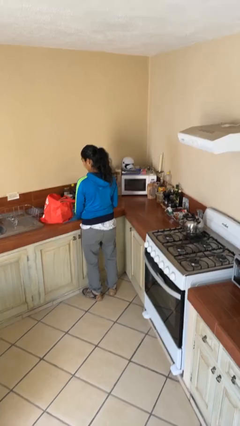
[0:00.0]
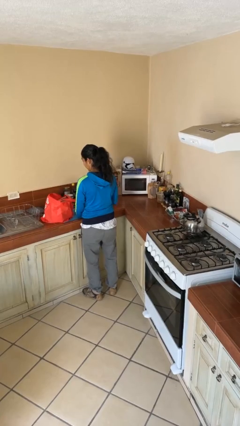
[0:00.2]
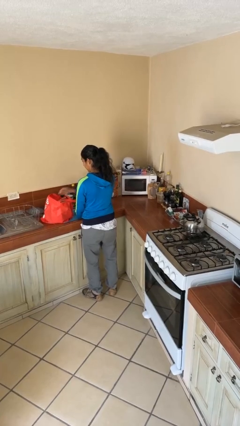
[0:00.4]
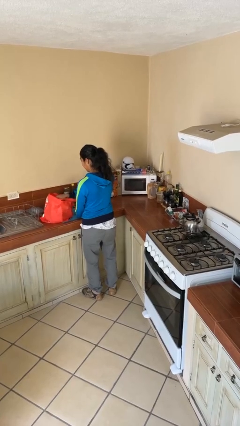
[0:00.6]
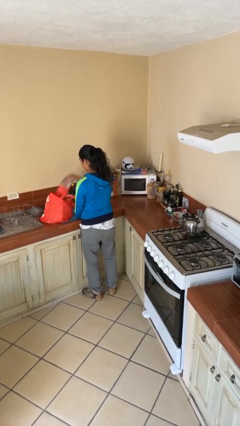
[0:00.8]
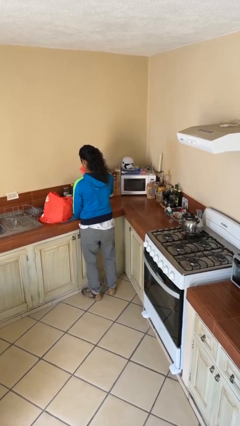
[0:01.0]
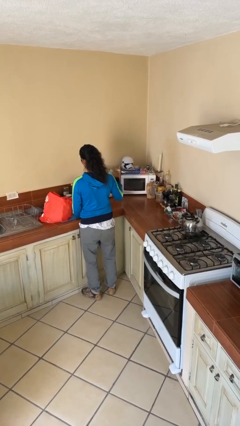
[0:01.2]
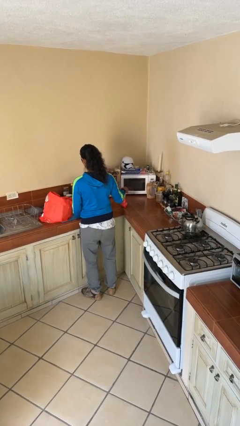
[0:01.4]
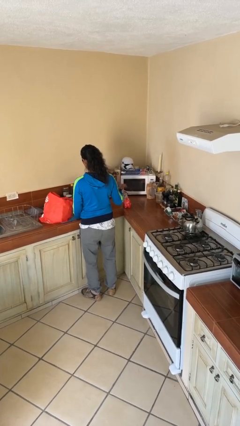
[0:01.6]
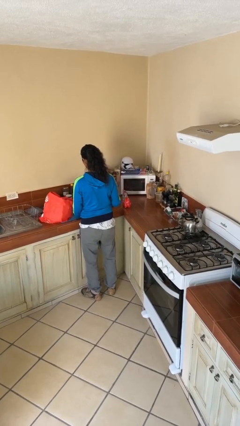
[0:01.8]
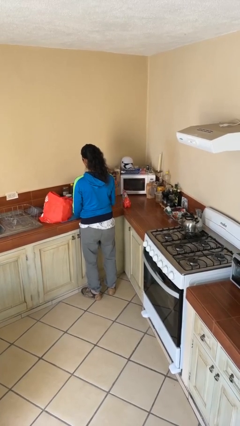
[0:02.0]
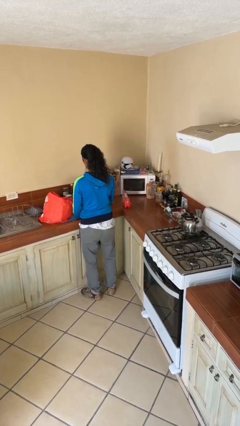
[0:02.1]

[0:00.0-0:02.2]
person takes object from bag

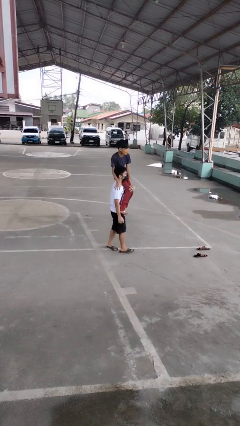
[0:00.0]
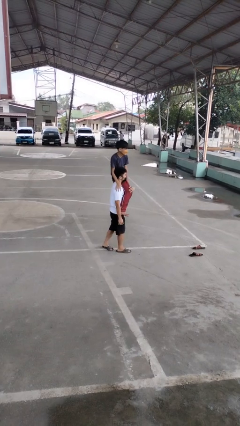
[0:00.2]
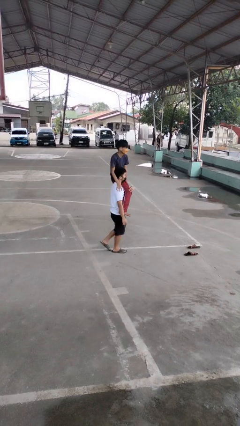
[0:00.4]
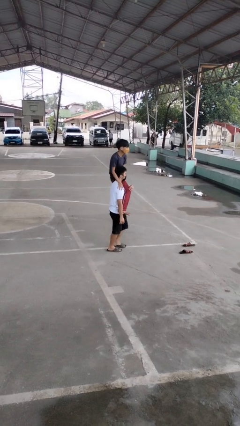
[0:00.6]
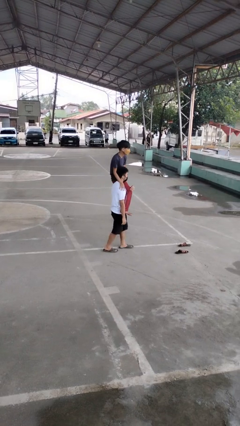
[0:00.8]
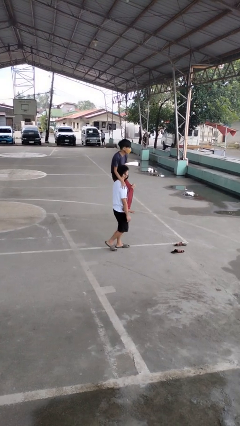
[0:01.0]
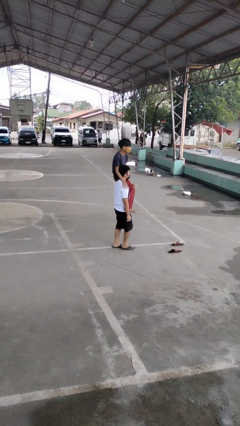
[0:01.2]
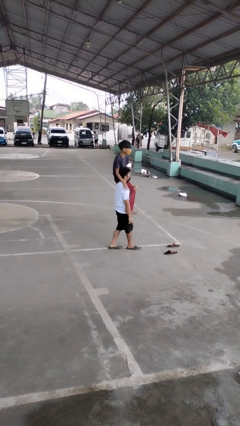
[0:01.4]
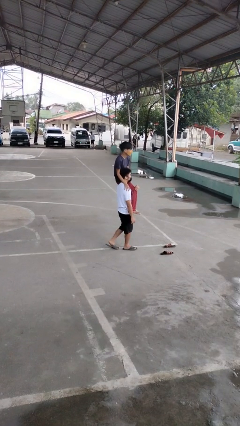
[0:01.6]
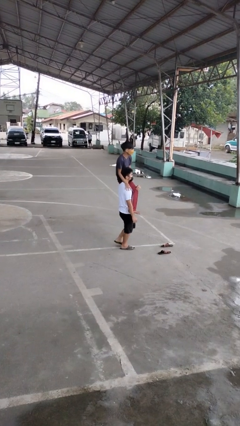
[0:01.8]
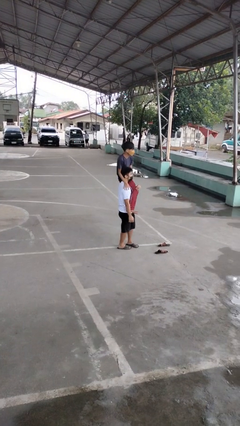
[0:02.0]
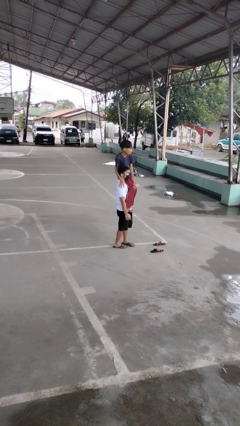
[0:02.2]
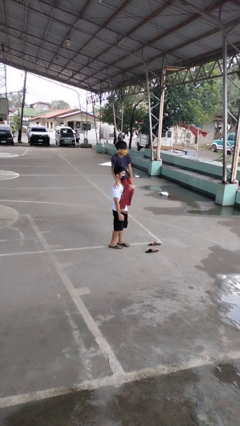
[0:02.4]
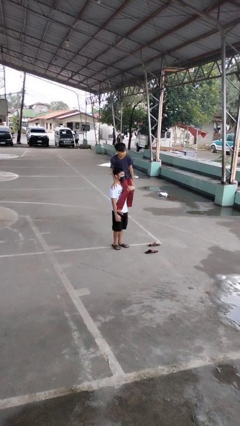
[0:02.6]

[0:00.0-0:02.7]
person carries person on shoulders

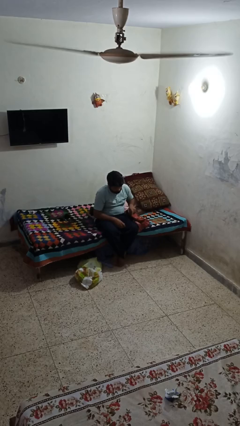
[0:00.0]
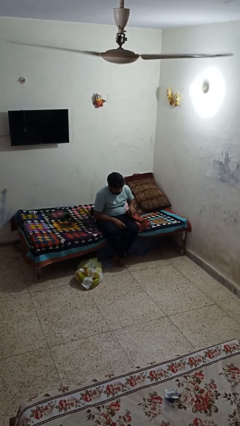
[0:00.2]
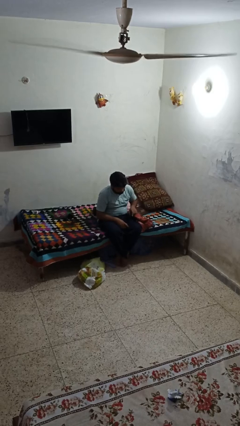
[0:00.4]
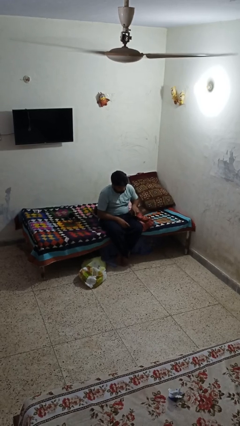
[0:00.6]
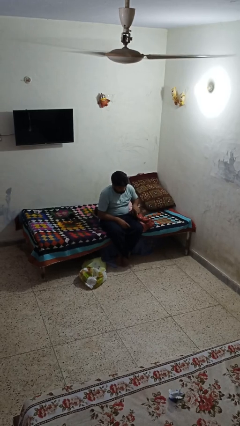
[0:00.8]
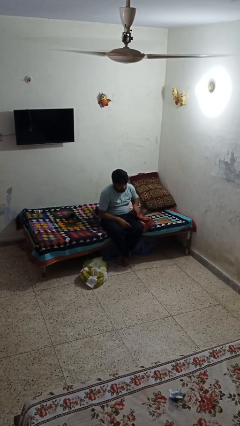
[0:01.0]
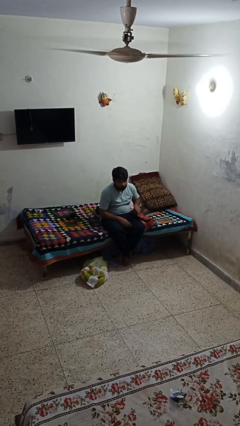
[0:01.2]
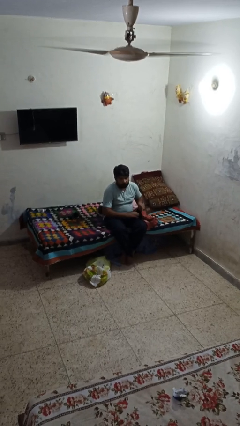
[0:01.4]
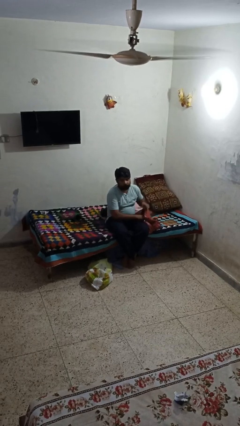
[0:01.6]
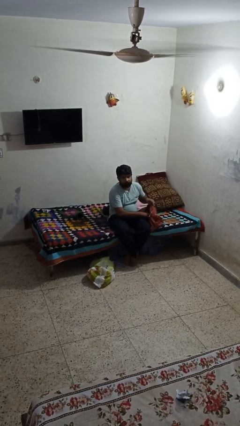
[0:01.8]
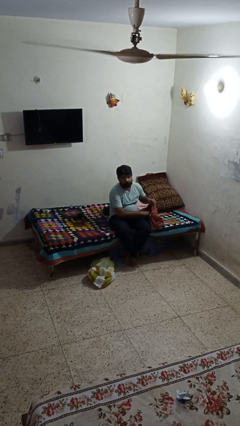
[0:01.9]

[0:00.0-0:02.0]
person puts object into purse

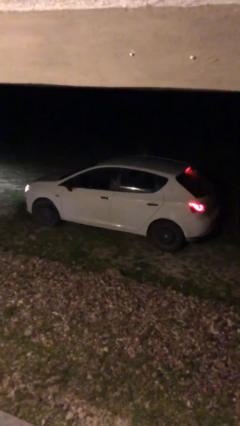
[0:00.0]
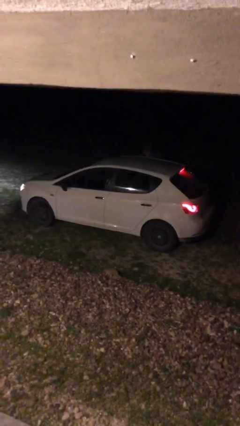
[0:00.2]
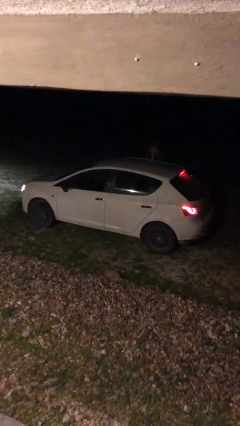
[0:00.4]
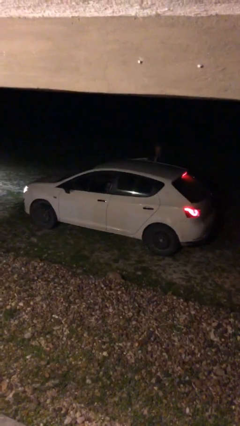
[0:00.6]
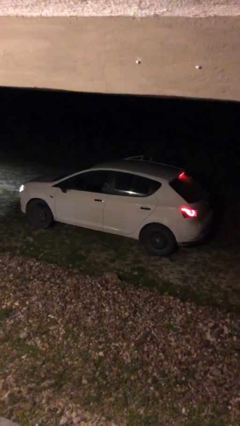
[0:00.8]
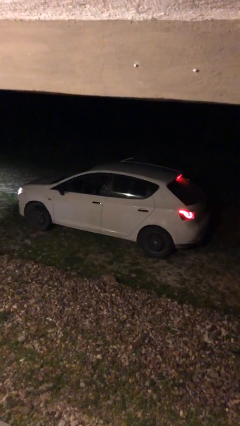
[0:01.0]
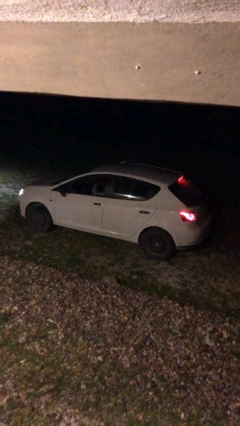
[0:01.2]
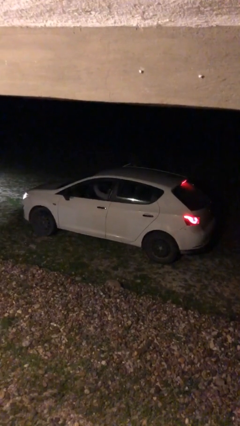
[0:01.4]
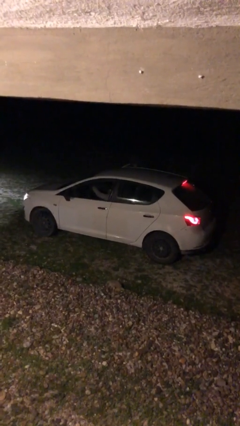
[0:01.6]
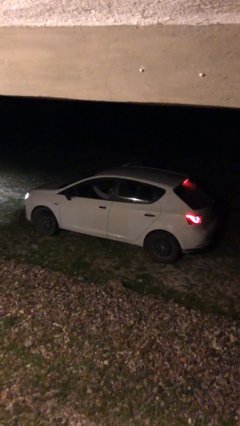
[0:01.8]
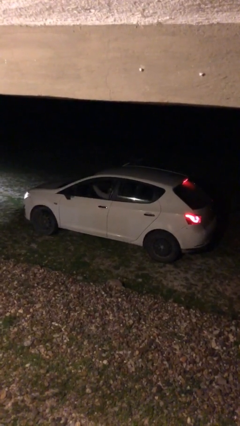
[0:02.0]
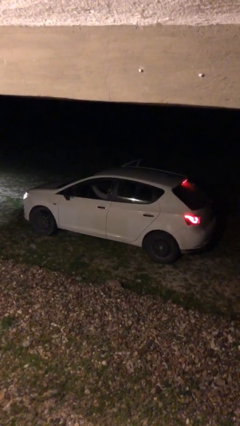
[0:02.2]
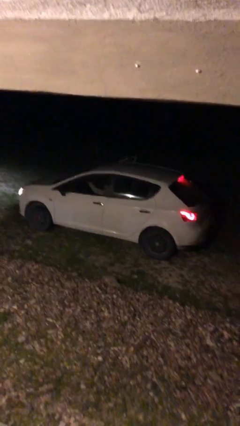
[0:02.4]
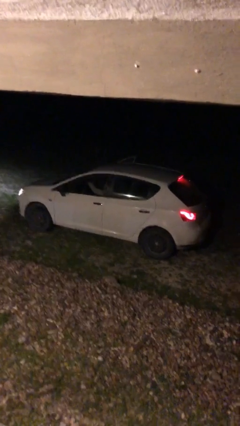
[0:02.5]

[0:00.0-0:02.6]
car picks up person

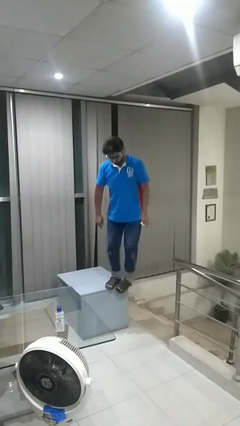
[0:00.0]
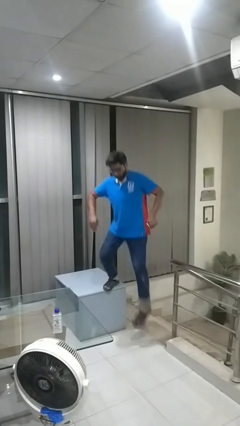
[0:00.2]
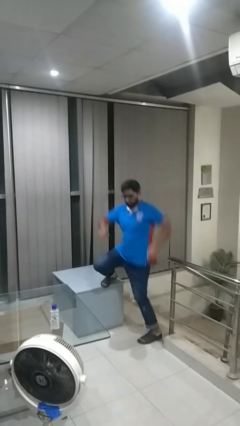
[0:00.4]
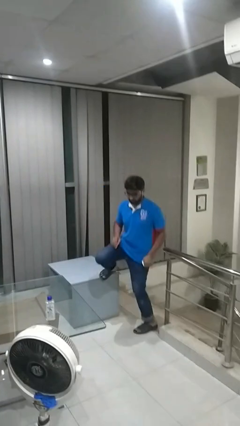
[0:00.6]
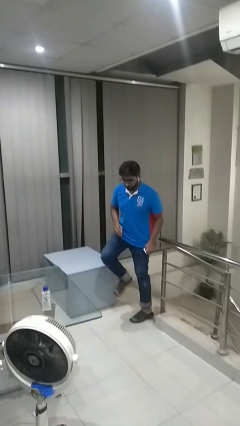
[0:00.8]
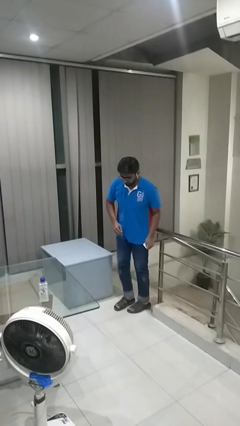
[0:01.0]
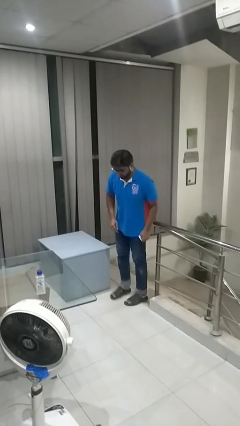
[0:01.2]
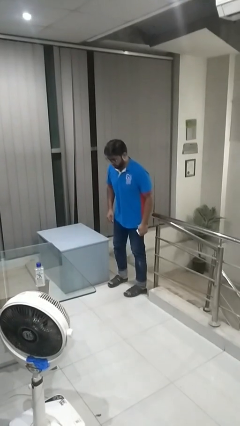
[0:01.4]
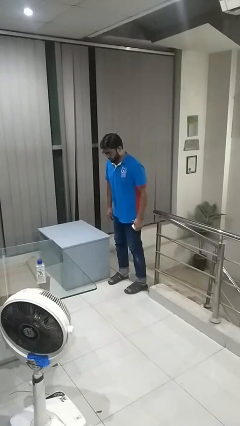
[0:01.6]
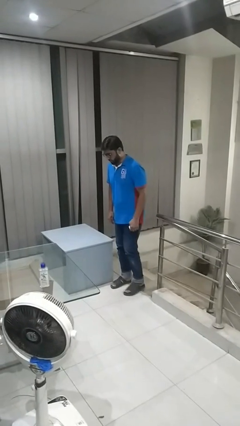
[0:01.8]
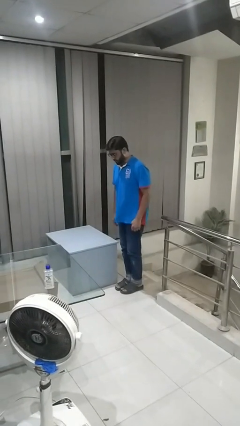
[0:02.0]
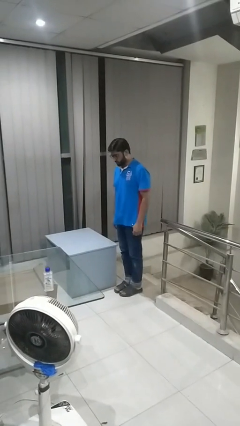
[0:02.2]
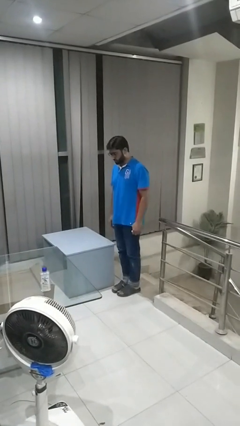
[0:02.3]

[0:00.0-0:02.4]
person climbs off table

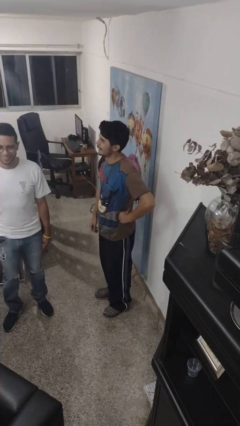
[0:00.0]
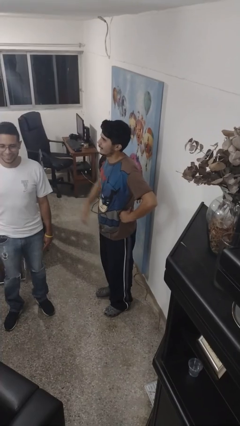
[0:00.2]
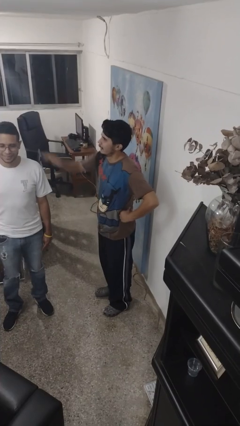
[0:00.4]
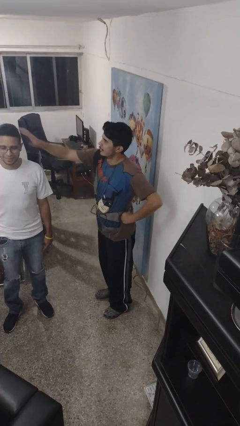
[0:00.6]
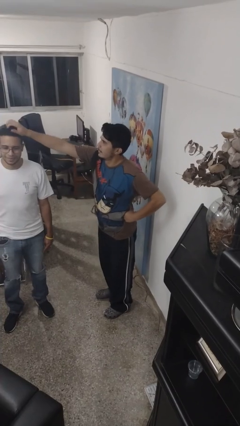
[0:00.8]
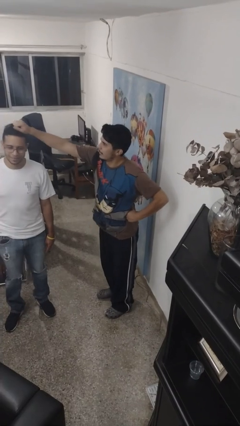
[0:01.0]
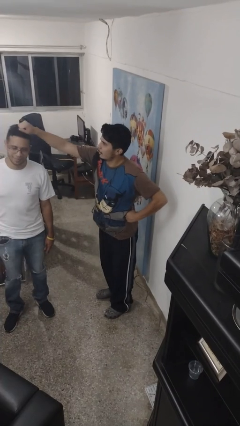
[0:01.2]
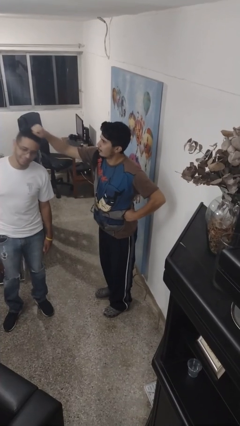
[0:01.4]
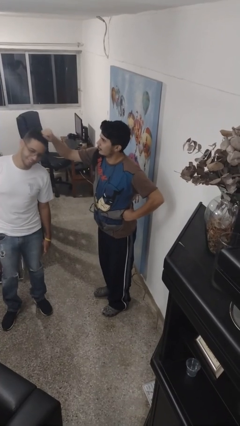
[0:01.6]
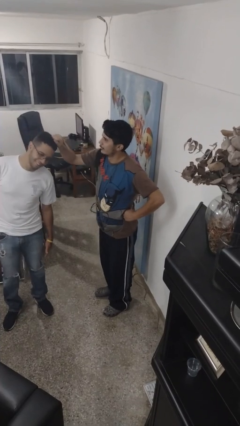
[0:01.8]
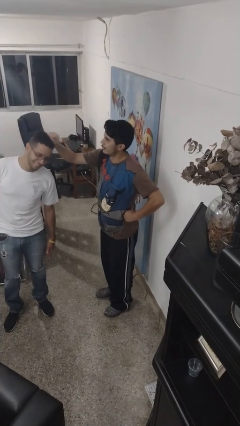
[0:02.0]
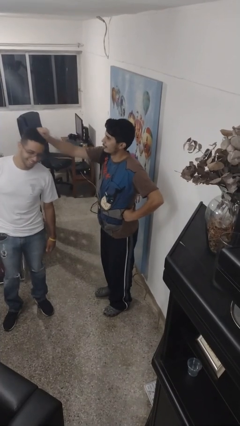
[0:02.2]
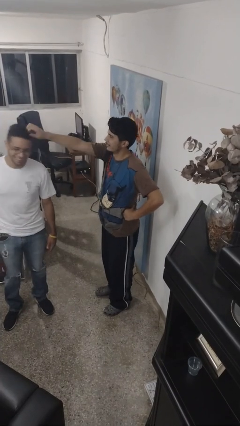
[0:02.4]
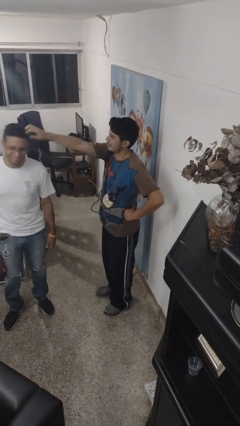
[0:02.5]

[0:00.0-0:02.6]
person grabs person by hair

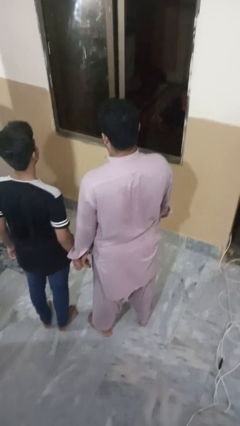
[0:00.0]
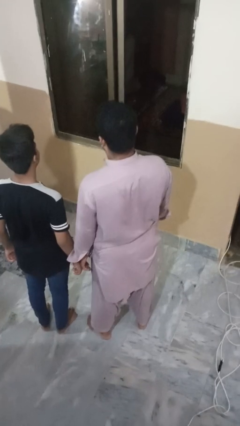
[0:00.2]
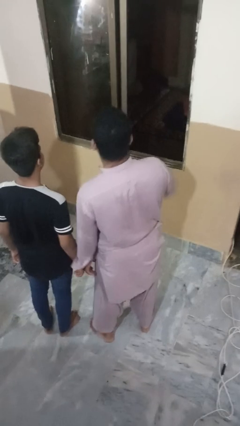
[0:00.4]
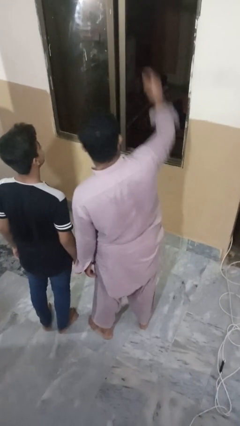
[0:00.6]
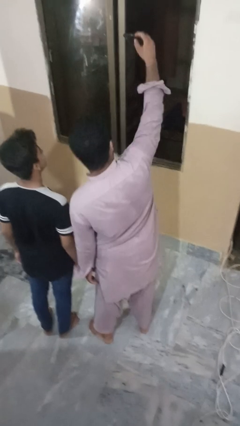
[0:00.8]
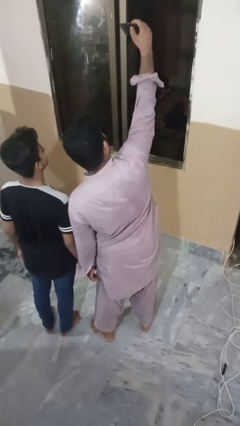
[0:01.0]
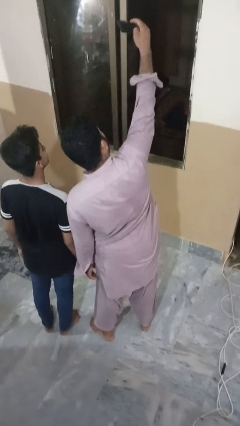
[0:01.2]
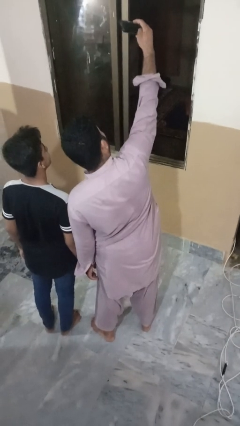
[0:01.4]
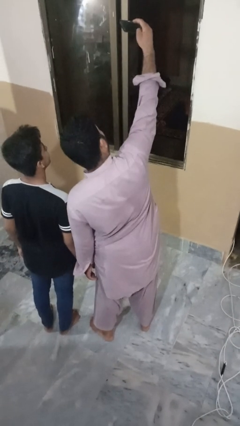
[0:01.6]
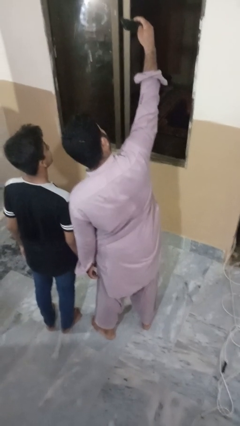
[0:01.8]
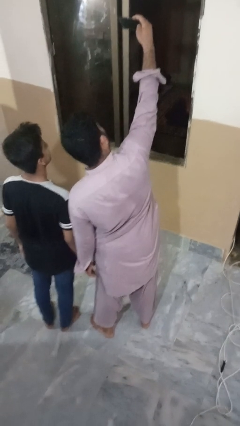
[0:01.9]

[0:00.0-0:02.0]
person takes selfie with person

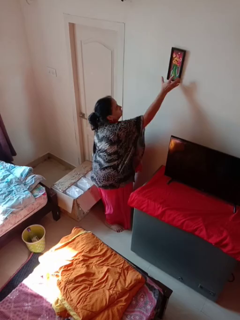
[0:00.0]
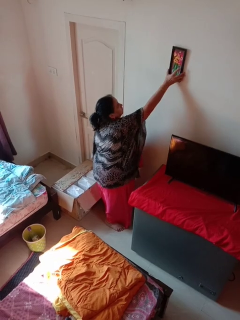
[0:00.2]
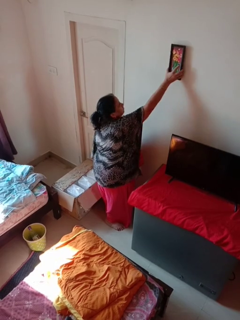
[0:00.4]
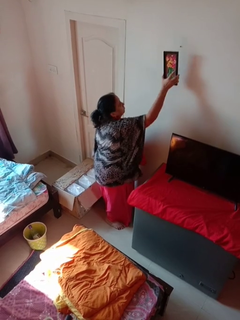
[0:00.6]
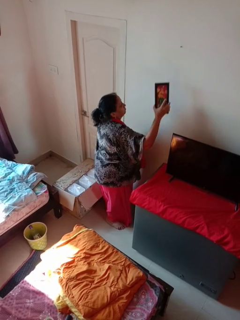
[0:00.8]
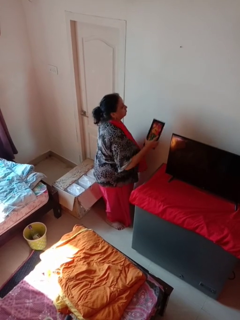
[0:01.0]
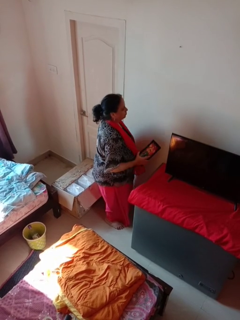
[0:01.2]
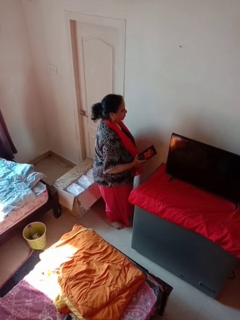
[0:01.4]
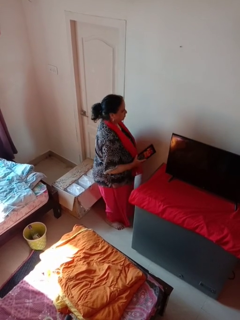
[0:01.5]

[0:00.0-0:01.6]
person takes down picture frame
